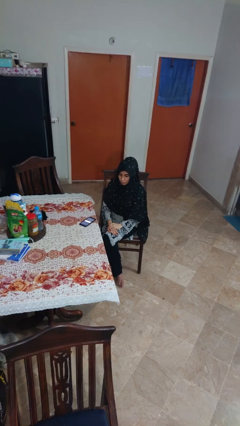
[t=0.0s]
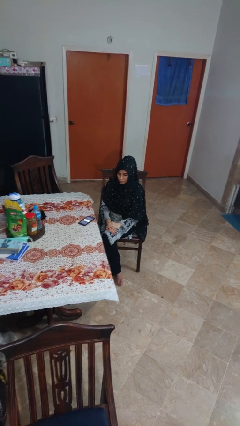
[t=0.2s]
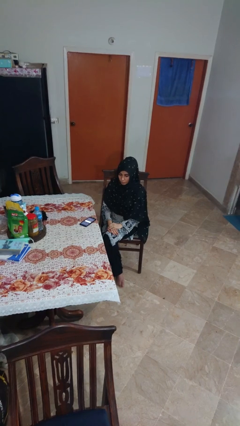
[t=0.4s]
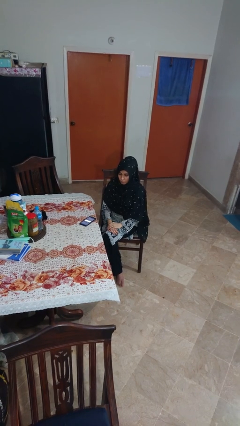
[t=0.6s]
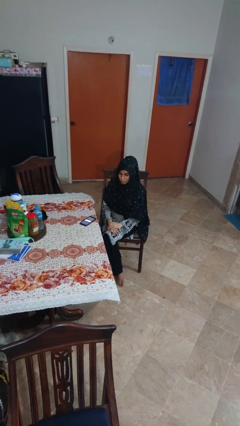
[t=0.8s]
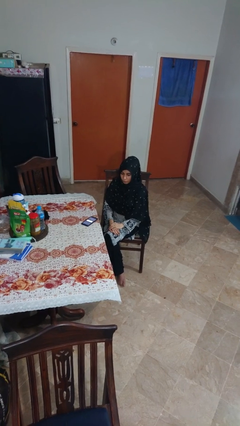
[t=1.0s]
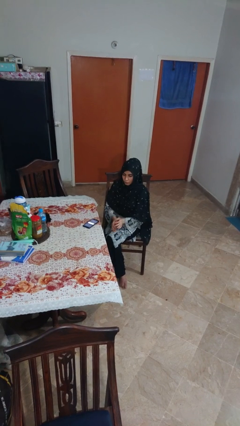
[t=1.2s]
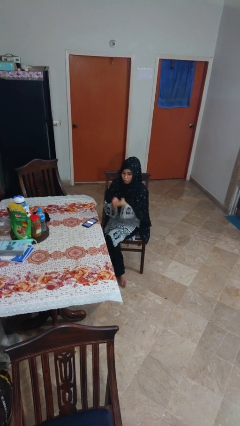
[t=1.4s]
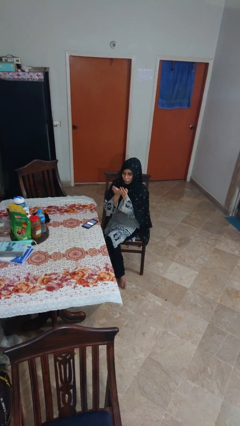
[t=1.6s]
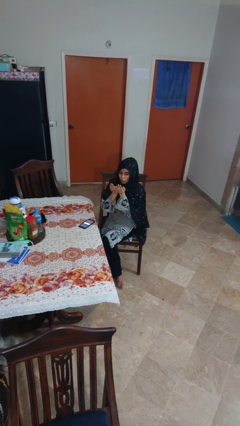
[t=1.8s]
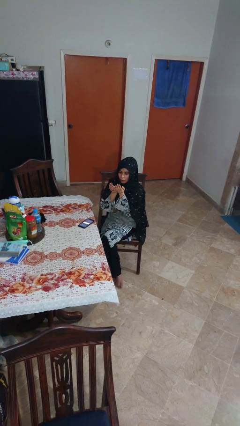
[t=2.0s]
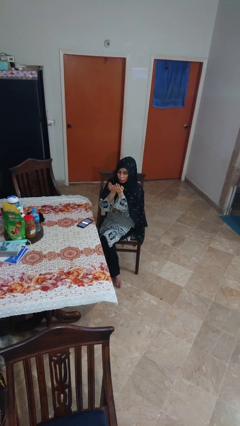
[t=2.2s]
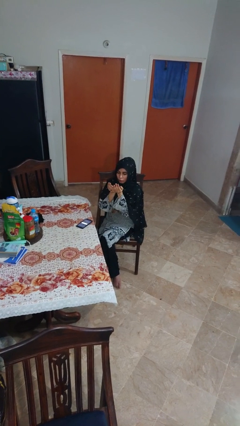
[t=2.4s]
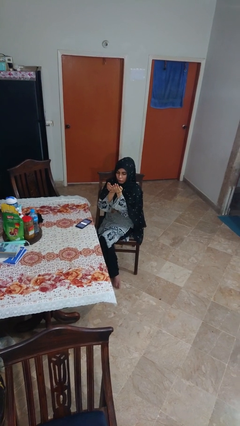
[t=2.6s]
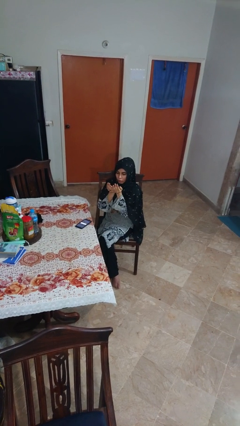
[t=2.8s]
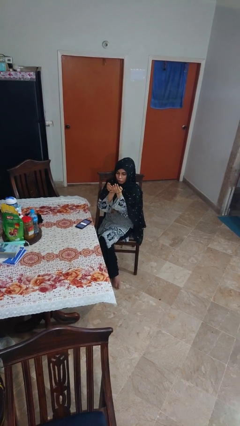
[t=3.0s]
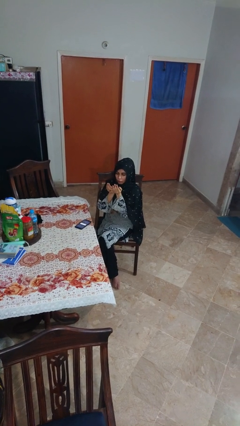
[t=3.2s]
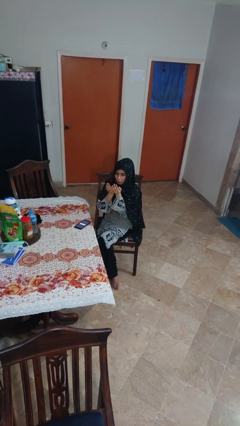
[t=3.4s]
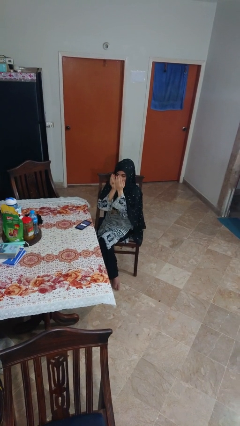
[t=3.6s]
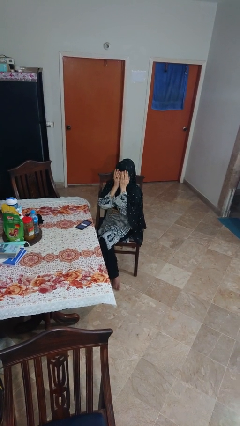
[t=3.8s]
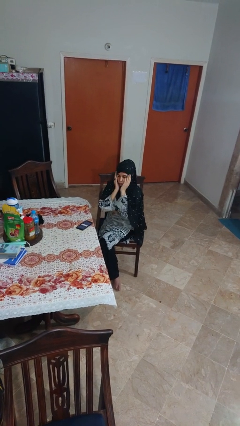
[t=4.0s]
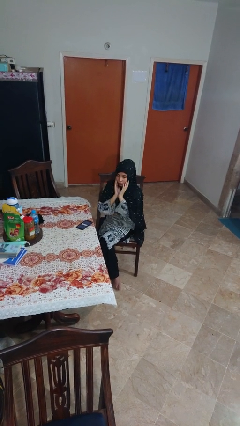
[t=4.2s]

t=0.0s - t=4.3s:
person prays

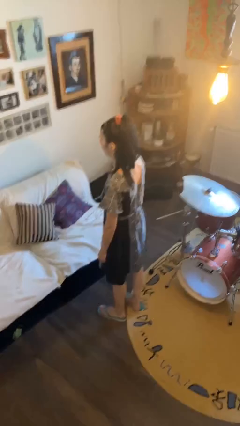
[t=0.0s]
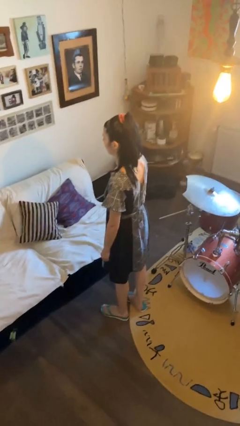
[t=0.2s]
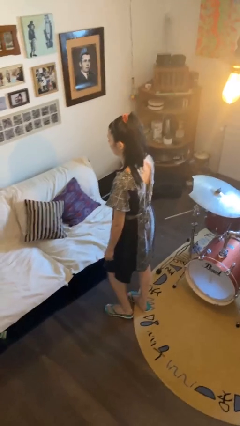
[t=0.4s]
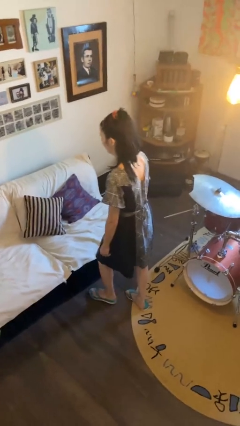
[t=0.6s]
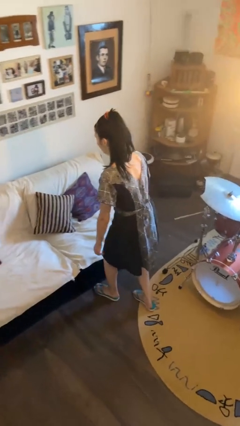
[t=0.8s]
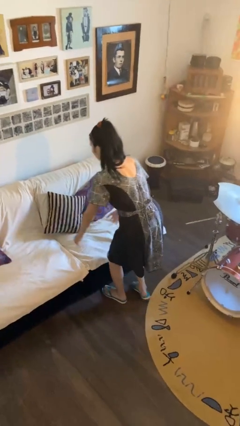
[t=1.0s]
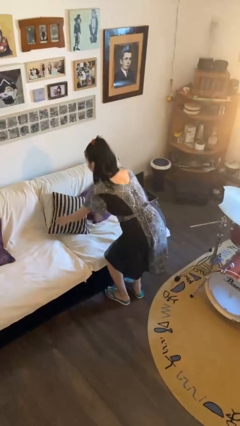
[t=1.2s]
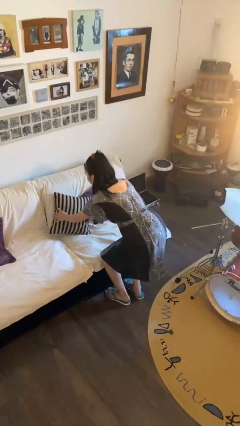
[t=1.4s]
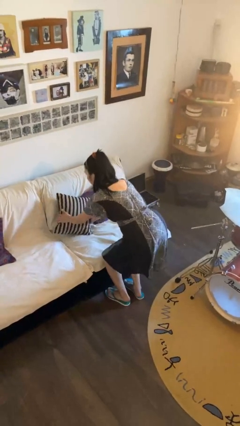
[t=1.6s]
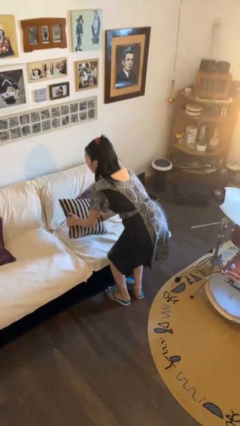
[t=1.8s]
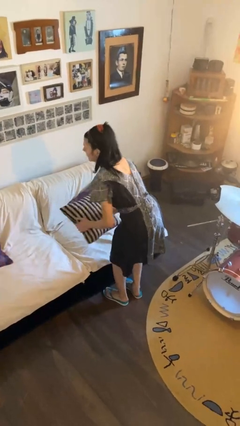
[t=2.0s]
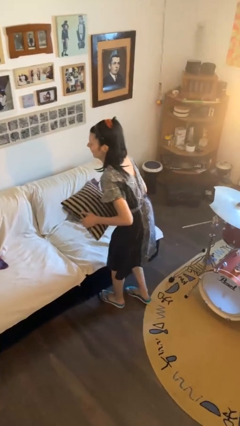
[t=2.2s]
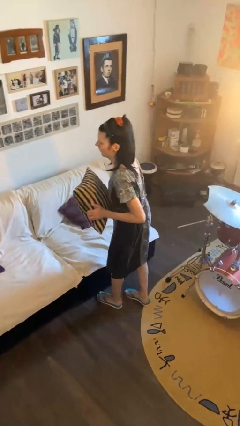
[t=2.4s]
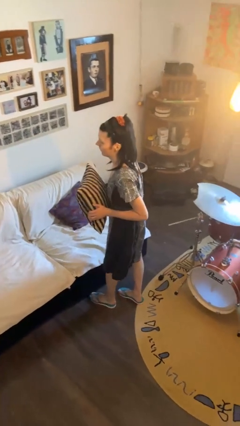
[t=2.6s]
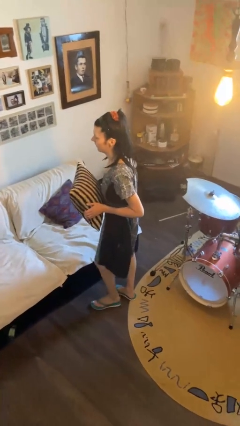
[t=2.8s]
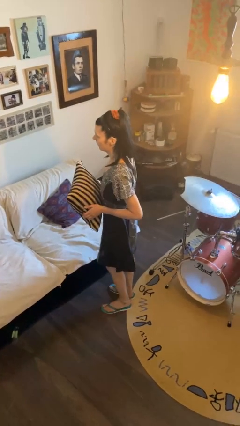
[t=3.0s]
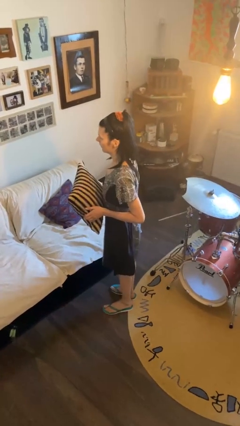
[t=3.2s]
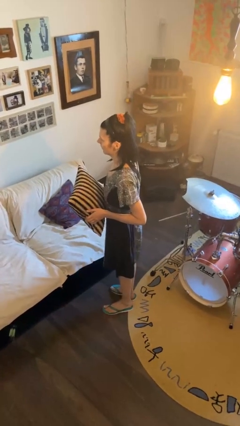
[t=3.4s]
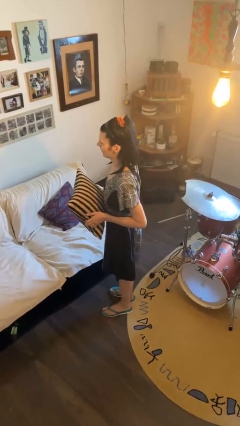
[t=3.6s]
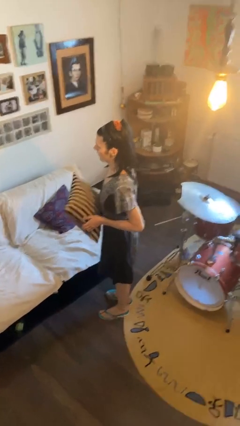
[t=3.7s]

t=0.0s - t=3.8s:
person picks up object from couch

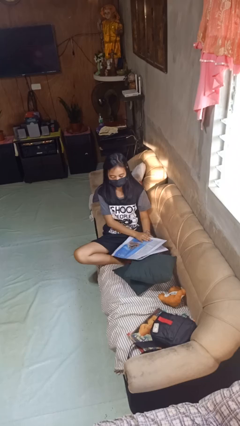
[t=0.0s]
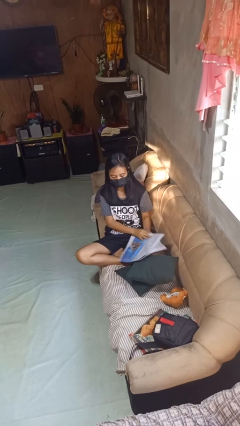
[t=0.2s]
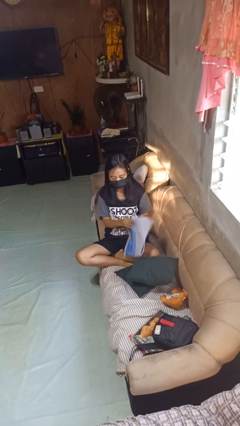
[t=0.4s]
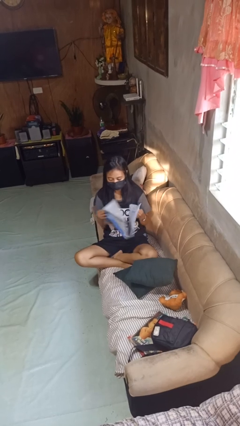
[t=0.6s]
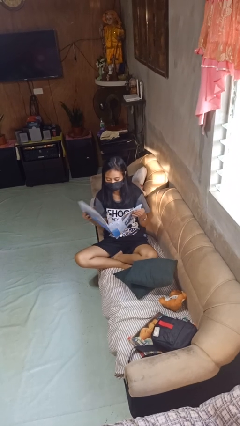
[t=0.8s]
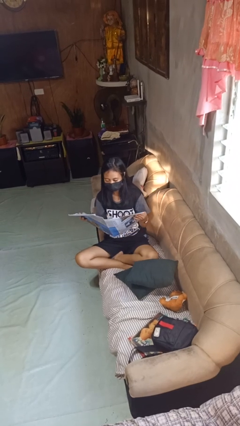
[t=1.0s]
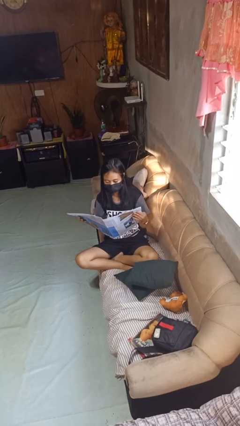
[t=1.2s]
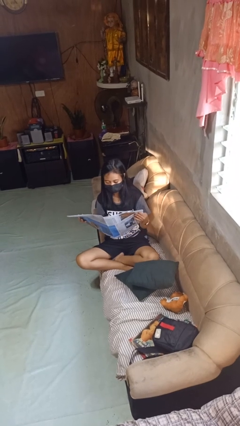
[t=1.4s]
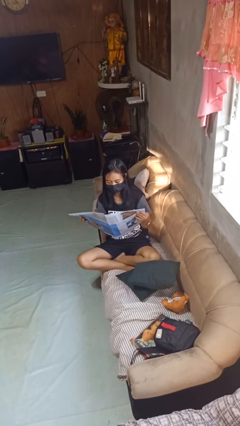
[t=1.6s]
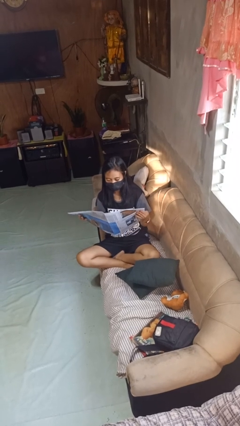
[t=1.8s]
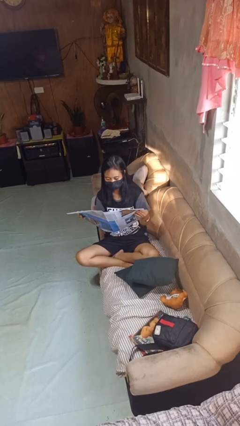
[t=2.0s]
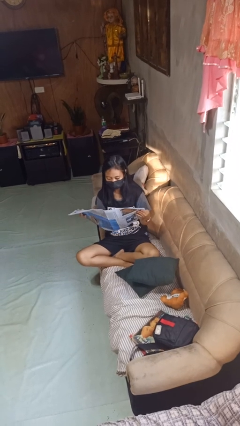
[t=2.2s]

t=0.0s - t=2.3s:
person reads newspaper

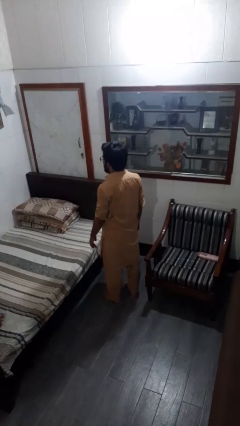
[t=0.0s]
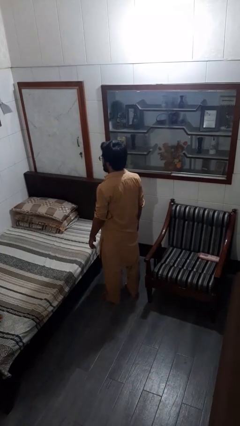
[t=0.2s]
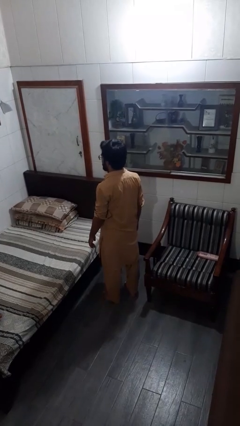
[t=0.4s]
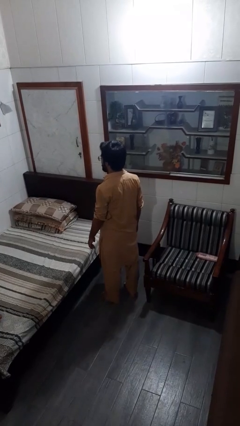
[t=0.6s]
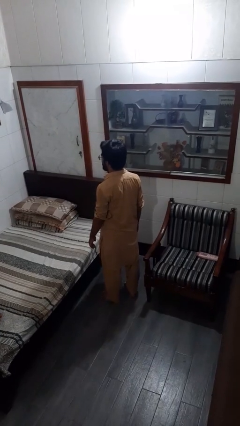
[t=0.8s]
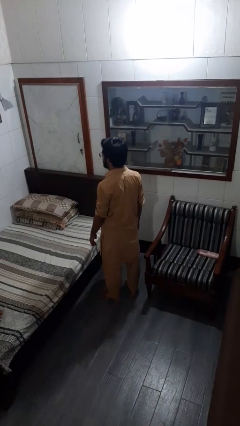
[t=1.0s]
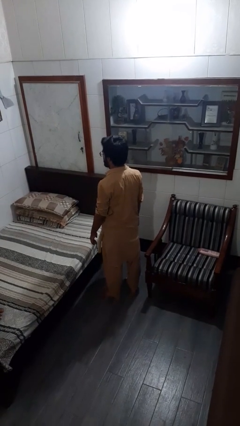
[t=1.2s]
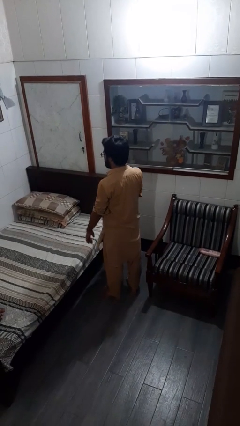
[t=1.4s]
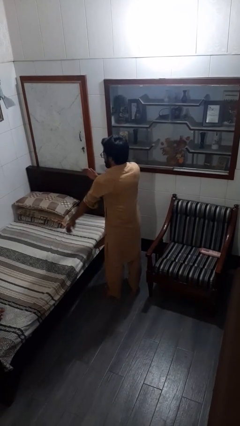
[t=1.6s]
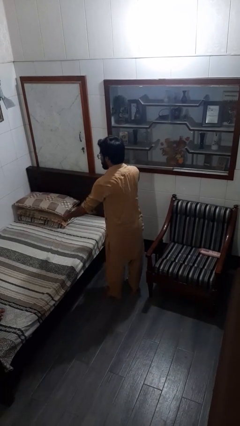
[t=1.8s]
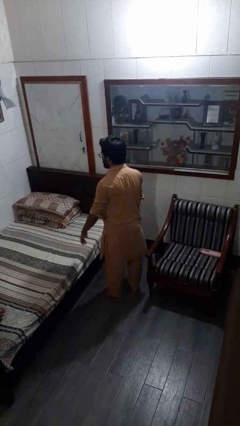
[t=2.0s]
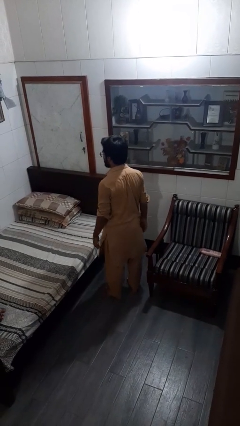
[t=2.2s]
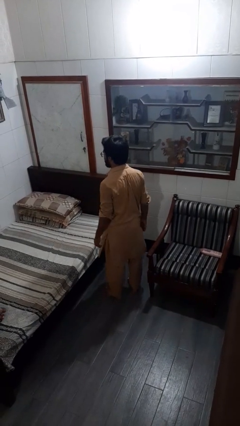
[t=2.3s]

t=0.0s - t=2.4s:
person swats bug

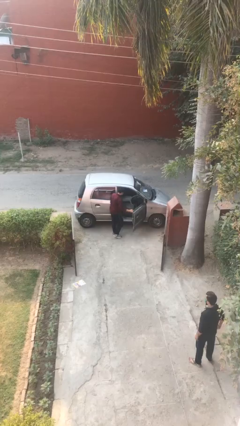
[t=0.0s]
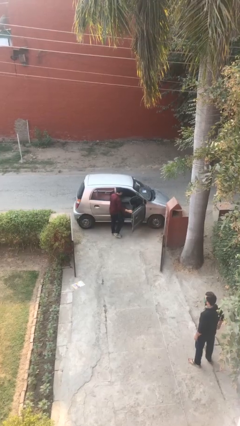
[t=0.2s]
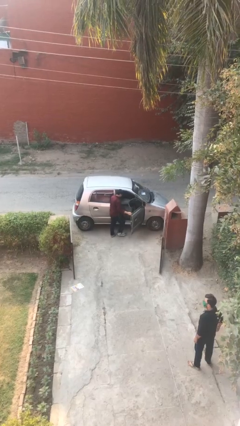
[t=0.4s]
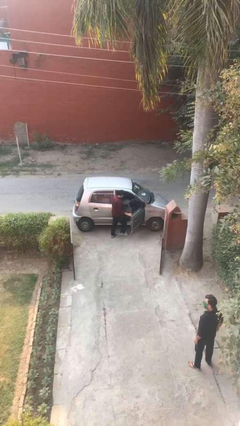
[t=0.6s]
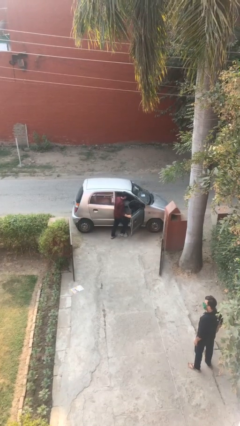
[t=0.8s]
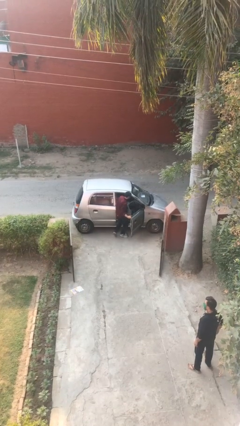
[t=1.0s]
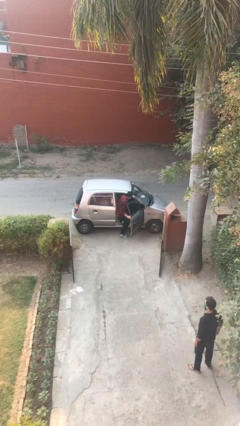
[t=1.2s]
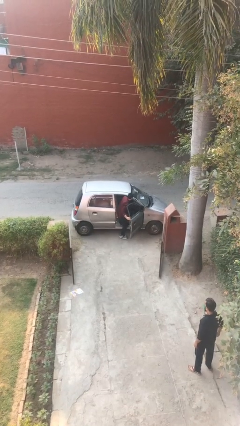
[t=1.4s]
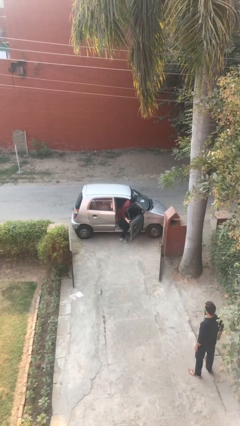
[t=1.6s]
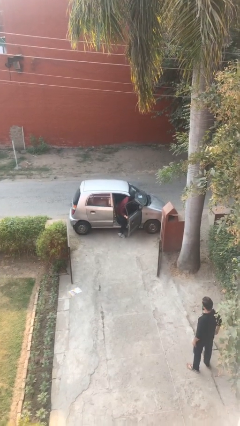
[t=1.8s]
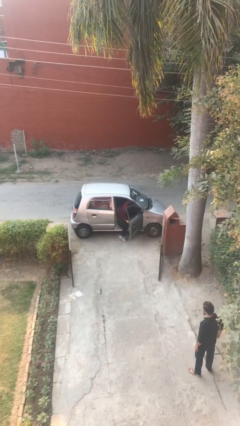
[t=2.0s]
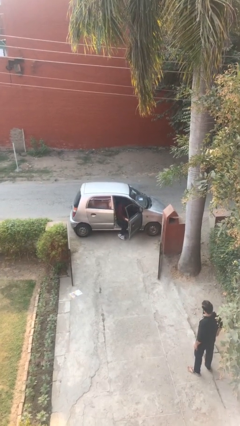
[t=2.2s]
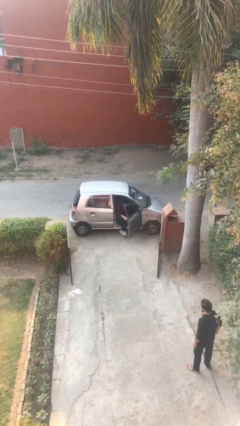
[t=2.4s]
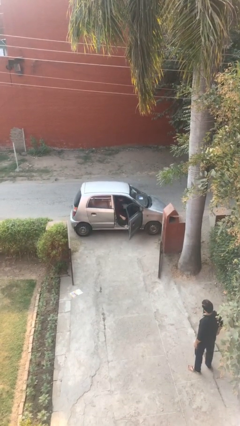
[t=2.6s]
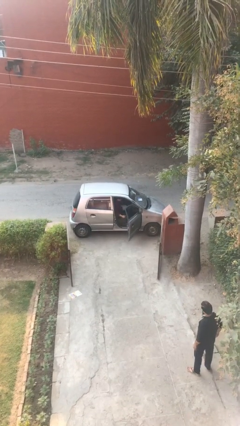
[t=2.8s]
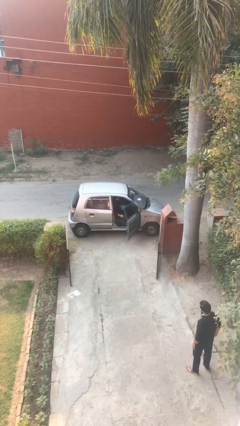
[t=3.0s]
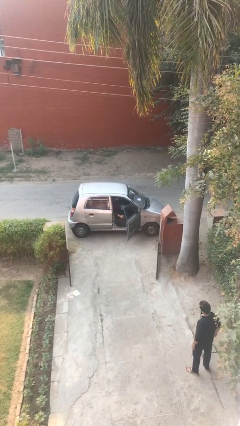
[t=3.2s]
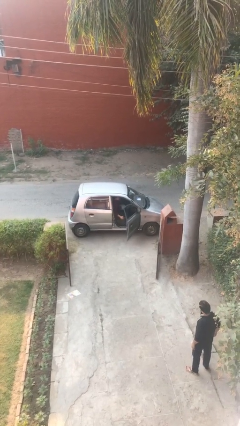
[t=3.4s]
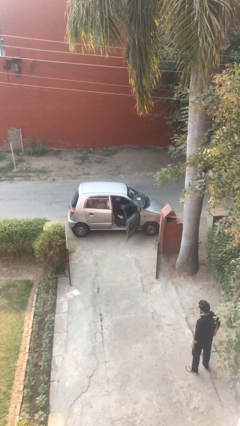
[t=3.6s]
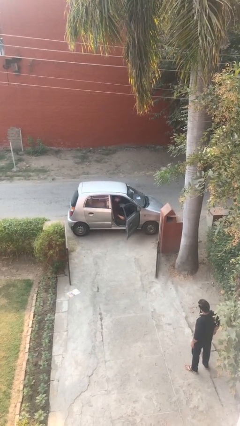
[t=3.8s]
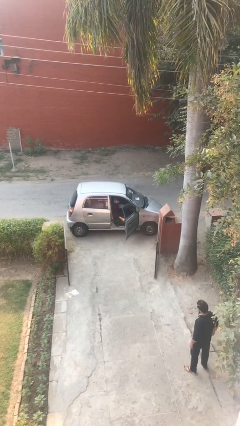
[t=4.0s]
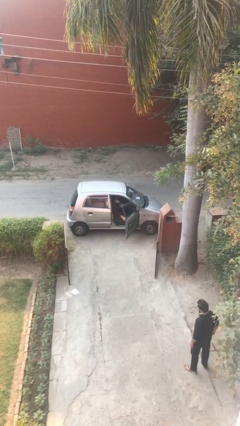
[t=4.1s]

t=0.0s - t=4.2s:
person enters car

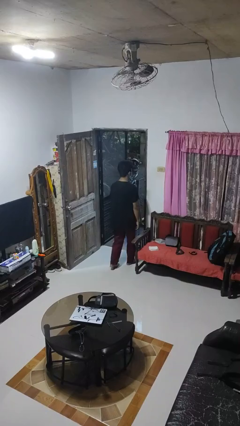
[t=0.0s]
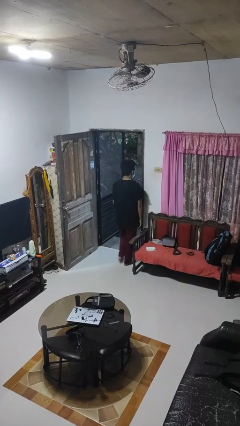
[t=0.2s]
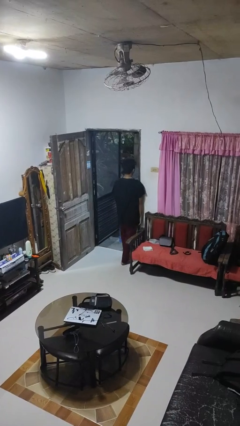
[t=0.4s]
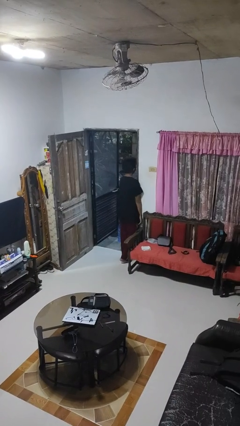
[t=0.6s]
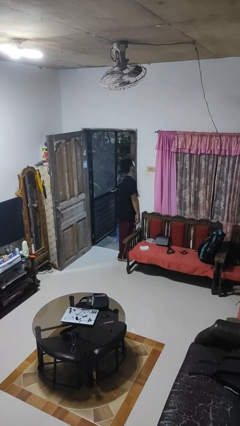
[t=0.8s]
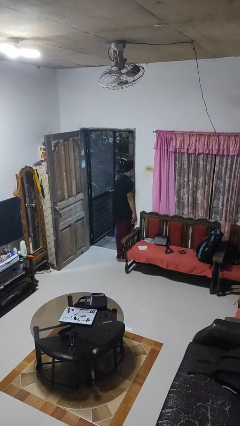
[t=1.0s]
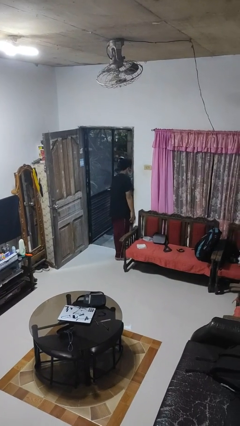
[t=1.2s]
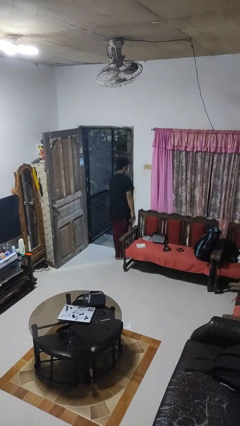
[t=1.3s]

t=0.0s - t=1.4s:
person bumps into wall
